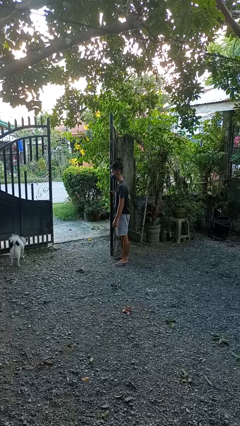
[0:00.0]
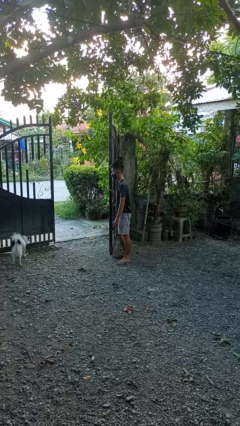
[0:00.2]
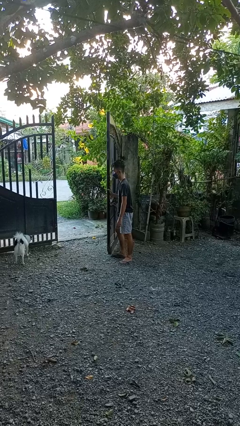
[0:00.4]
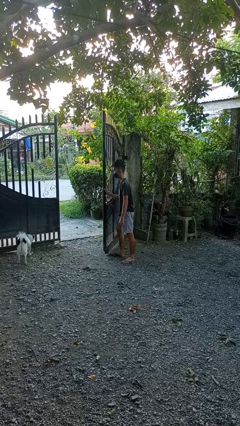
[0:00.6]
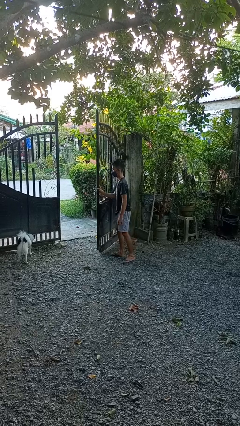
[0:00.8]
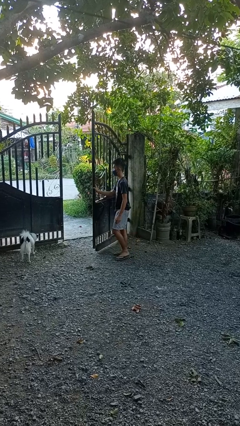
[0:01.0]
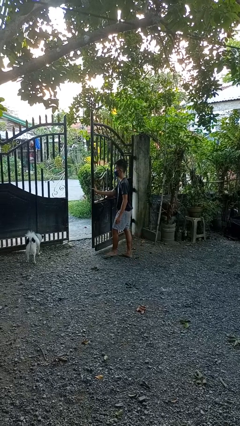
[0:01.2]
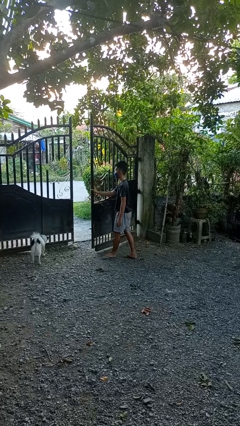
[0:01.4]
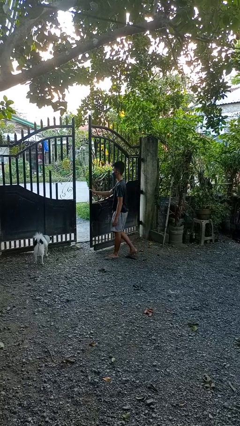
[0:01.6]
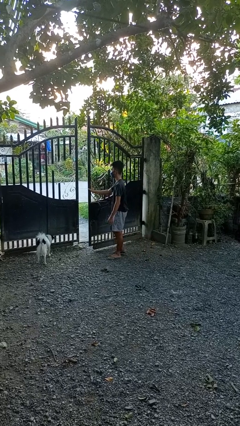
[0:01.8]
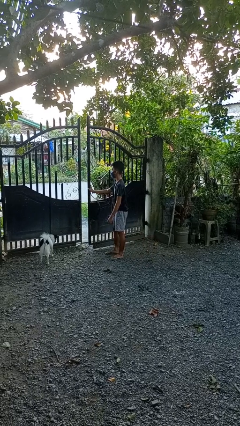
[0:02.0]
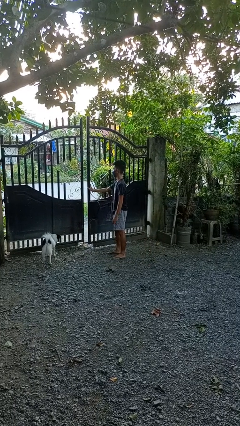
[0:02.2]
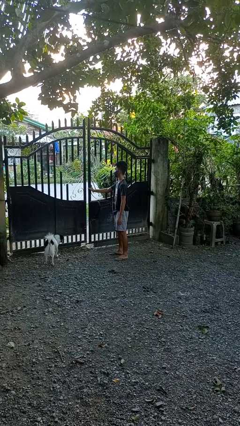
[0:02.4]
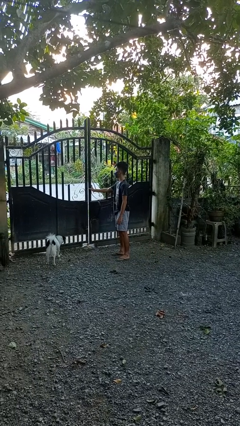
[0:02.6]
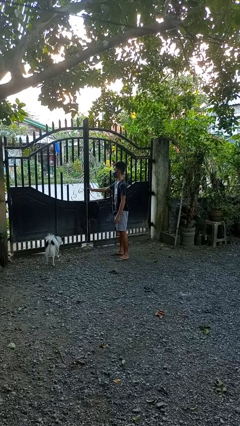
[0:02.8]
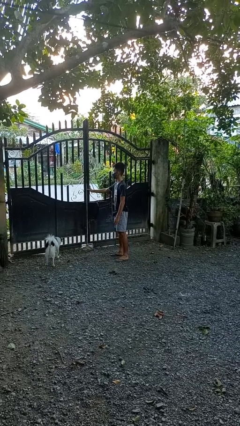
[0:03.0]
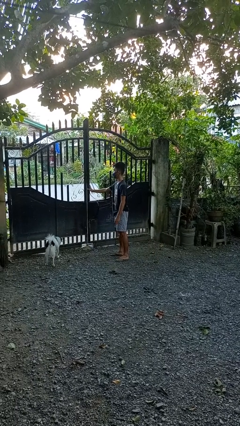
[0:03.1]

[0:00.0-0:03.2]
person closes gate

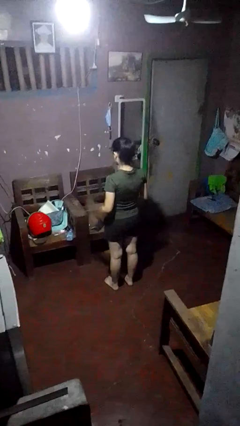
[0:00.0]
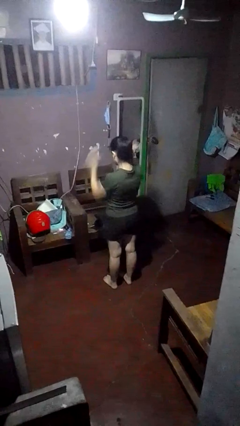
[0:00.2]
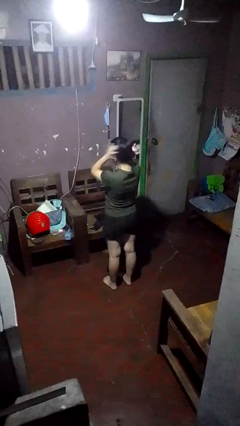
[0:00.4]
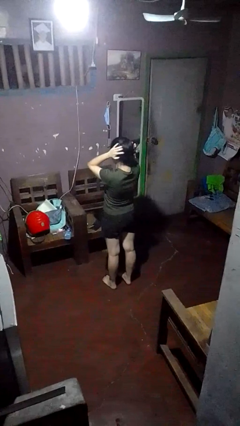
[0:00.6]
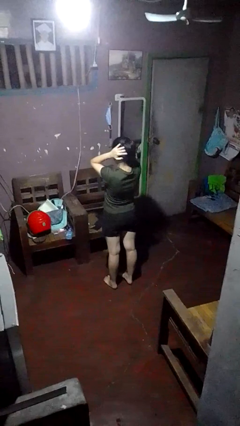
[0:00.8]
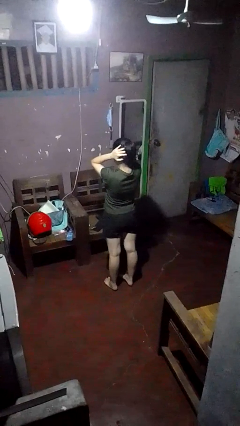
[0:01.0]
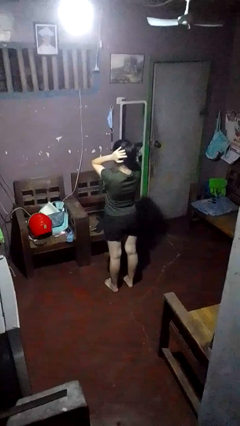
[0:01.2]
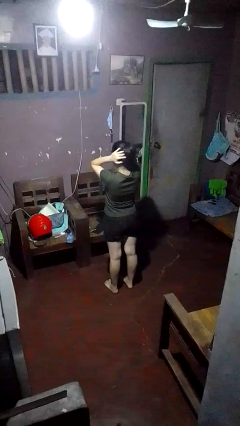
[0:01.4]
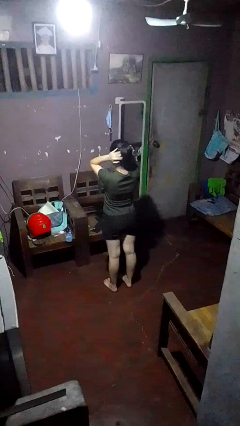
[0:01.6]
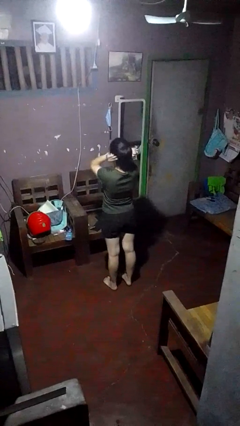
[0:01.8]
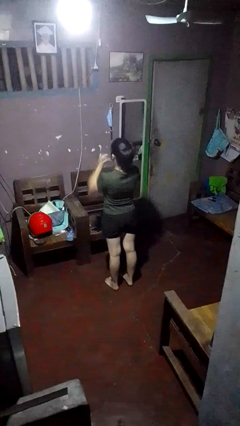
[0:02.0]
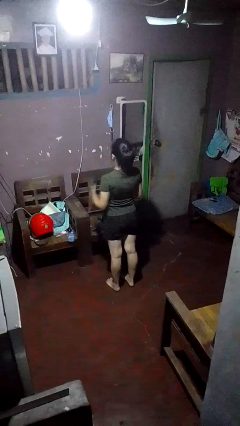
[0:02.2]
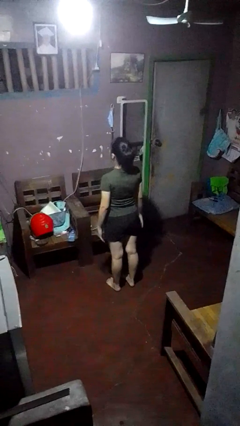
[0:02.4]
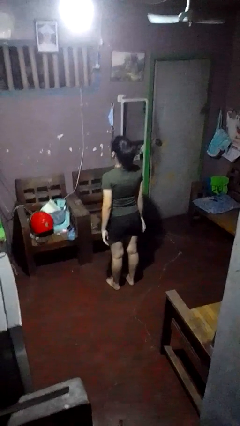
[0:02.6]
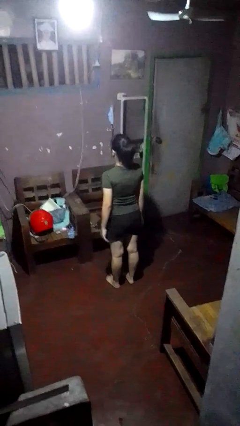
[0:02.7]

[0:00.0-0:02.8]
person puts fingers in ear

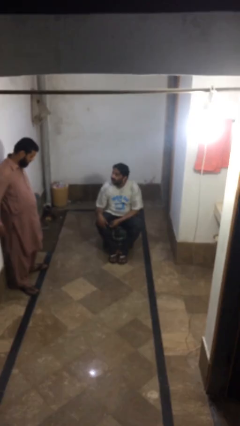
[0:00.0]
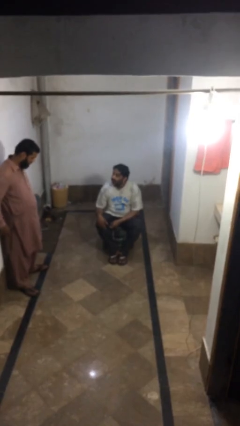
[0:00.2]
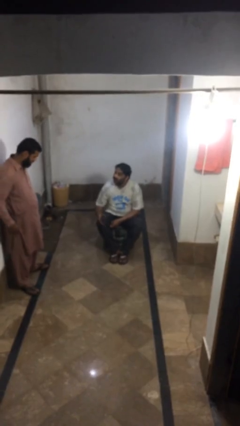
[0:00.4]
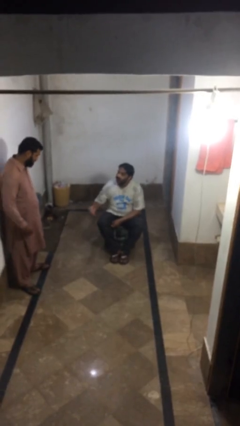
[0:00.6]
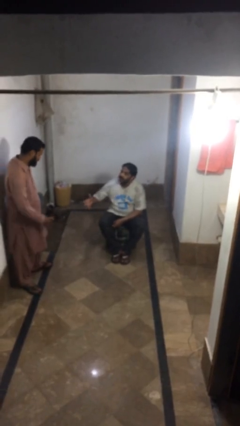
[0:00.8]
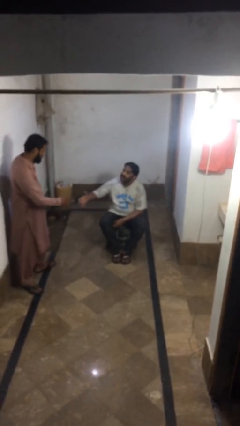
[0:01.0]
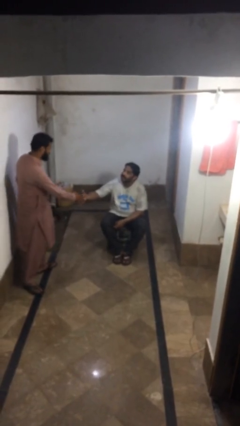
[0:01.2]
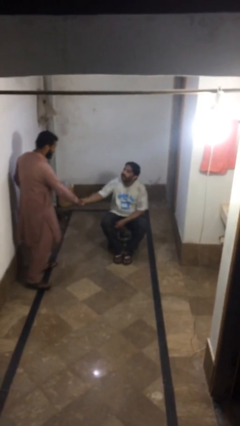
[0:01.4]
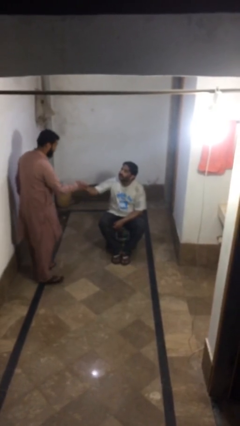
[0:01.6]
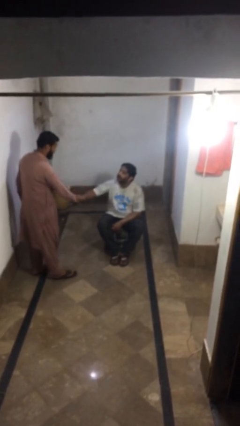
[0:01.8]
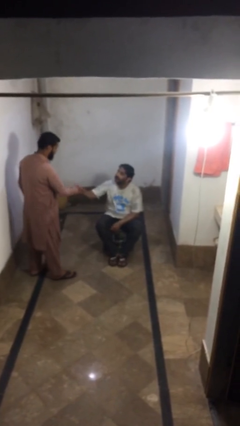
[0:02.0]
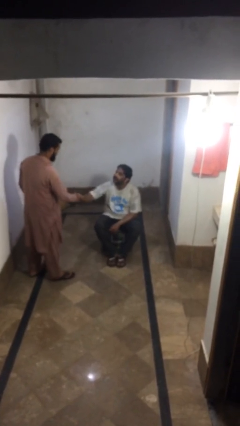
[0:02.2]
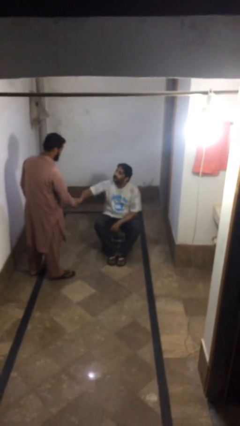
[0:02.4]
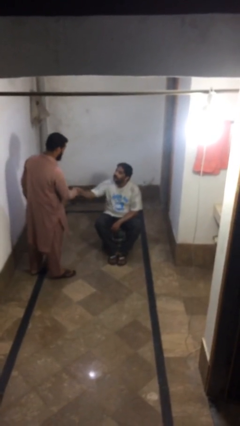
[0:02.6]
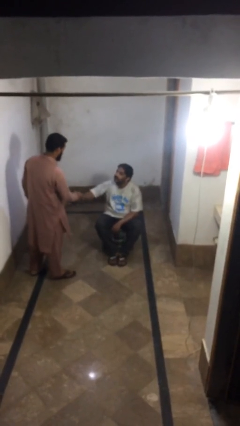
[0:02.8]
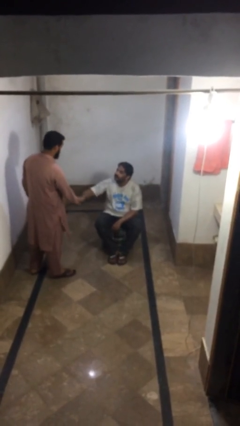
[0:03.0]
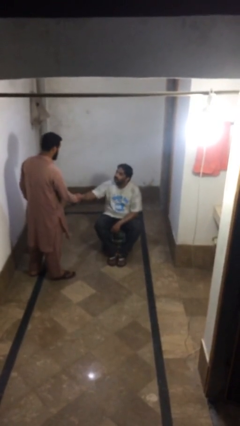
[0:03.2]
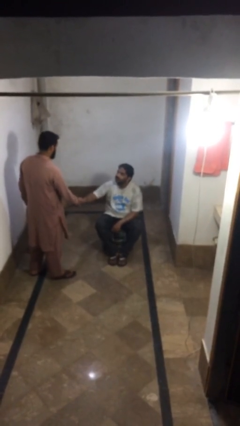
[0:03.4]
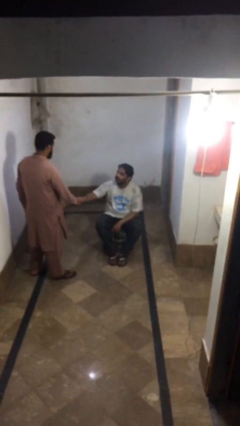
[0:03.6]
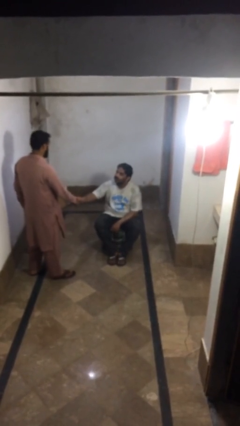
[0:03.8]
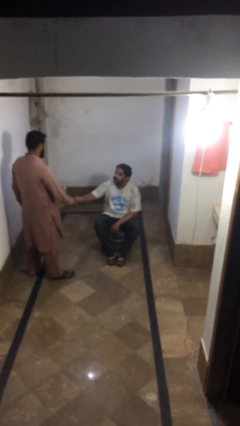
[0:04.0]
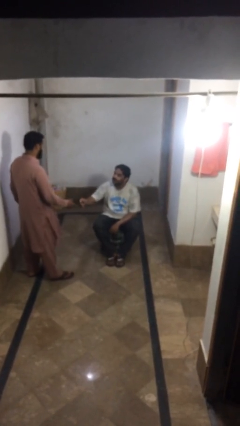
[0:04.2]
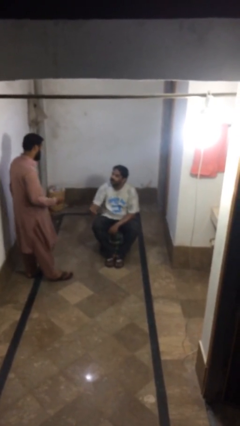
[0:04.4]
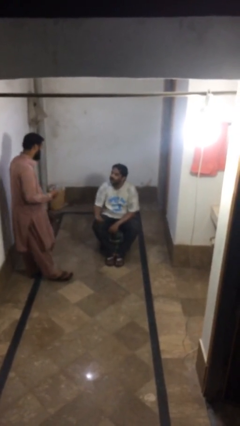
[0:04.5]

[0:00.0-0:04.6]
person shakes hand

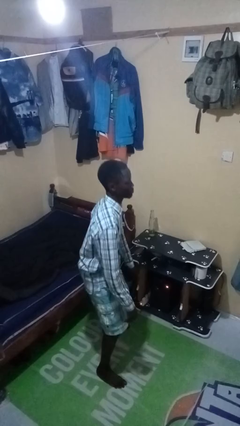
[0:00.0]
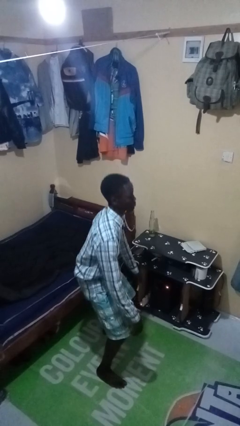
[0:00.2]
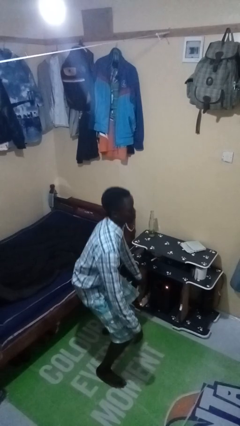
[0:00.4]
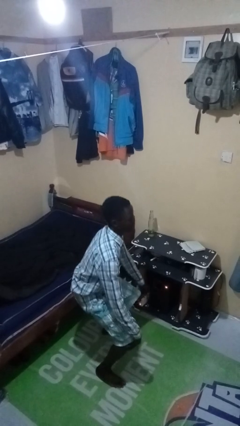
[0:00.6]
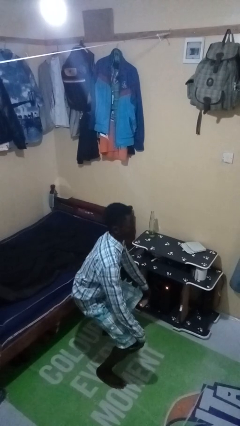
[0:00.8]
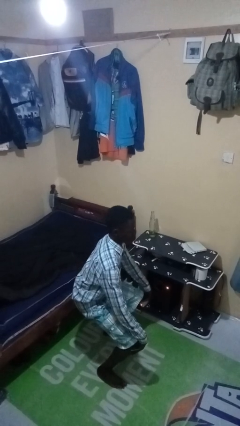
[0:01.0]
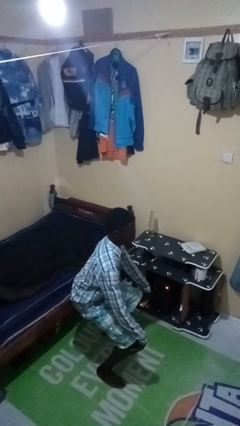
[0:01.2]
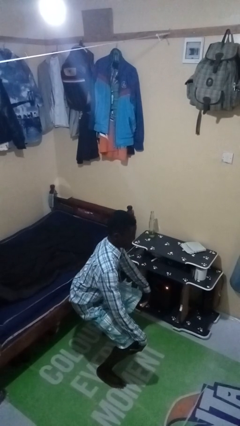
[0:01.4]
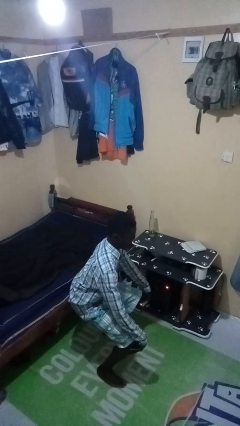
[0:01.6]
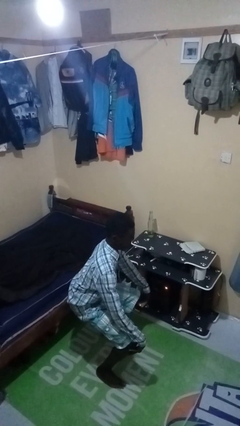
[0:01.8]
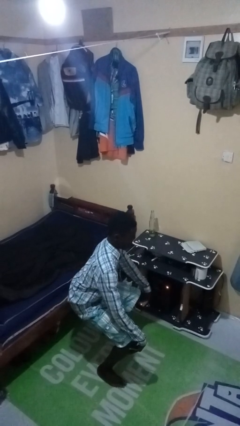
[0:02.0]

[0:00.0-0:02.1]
person squats

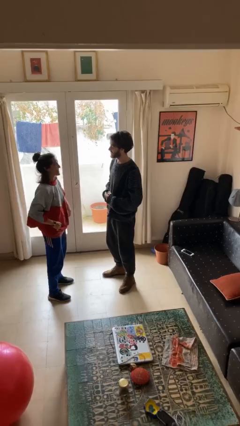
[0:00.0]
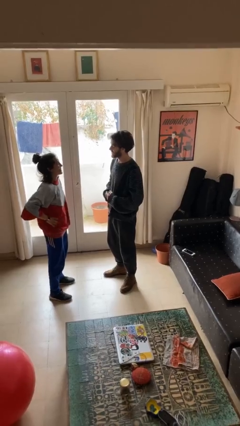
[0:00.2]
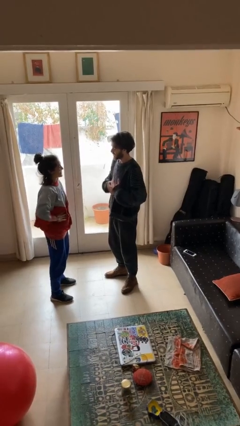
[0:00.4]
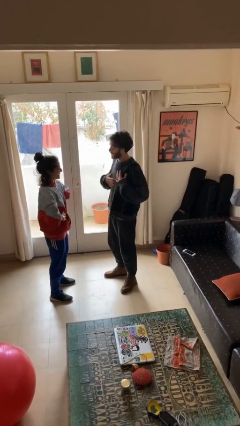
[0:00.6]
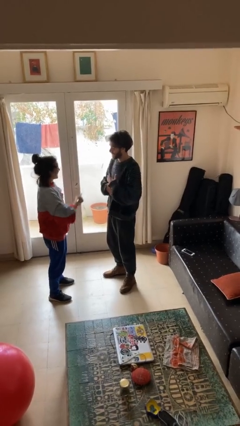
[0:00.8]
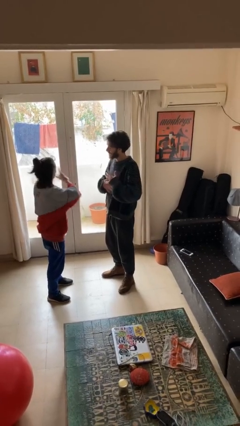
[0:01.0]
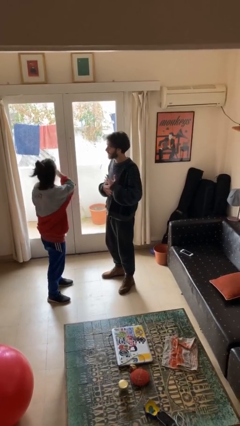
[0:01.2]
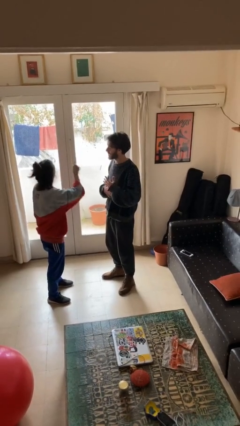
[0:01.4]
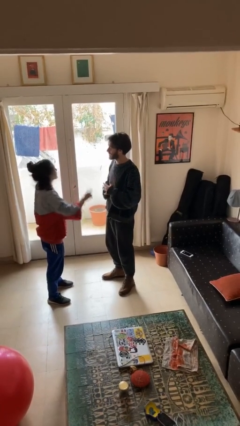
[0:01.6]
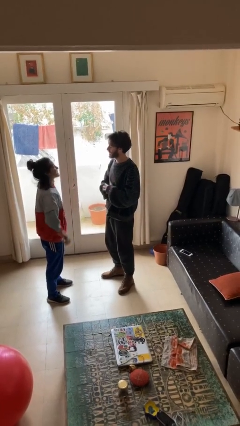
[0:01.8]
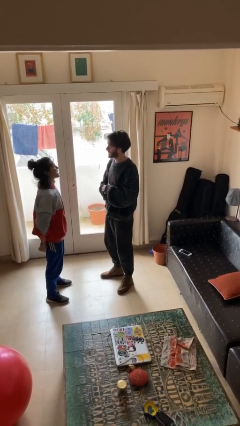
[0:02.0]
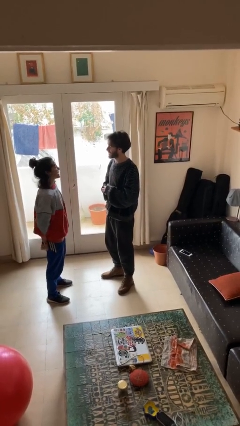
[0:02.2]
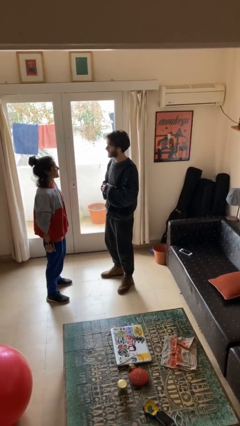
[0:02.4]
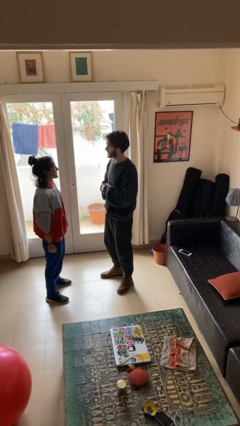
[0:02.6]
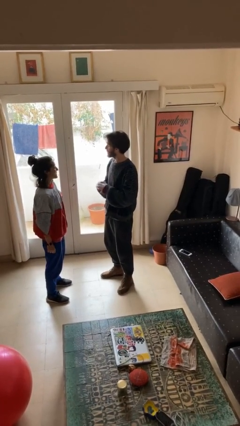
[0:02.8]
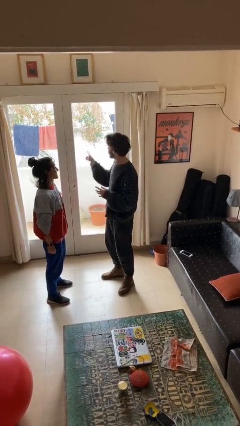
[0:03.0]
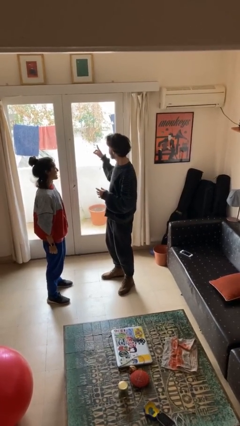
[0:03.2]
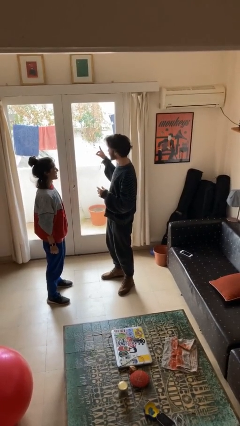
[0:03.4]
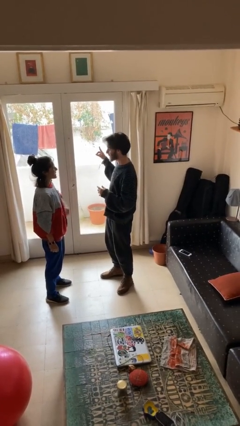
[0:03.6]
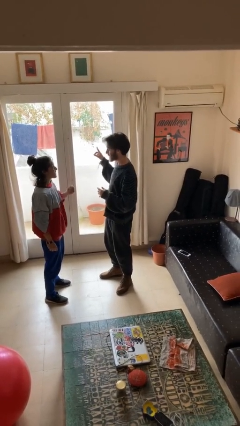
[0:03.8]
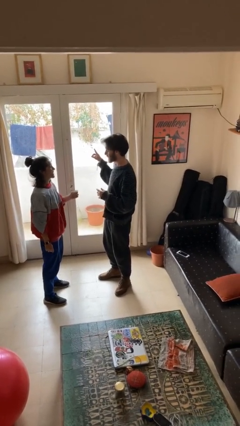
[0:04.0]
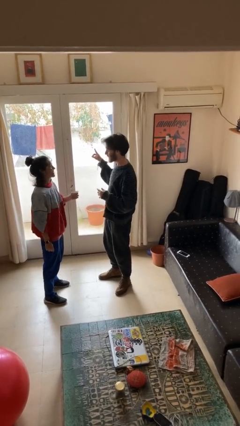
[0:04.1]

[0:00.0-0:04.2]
person talks to person

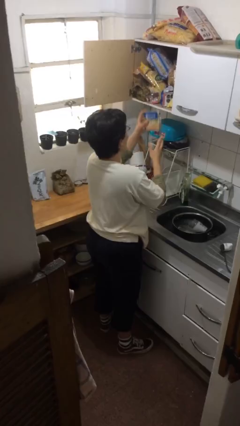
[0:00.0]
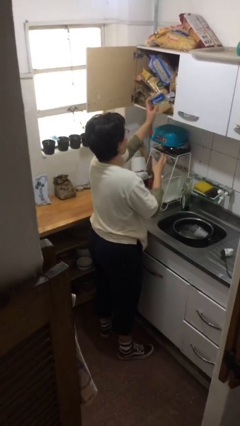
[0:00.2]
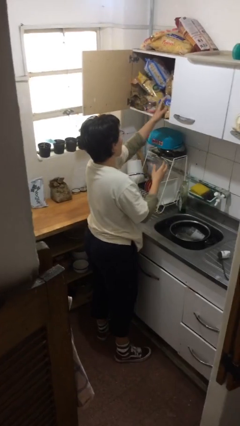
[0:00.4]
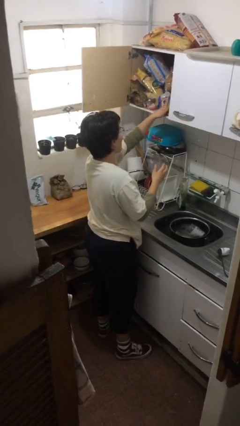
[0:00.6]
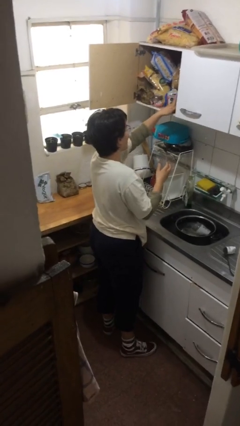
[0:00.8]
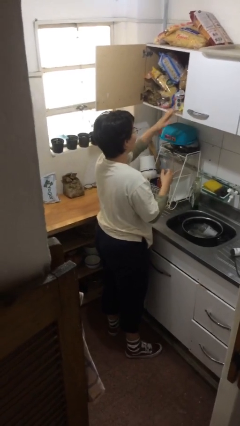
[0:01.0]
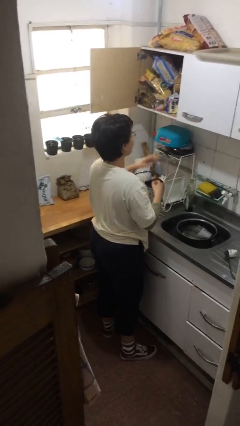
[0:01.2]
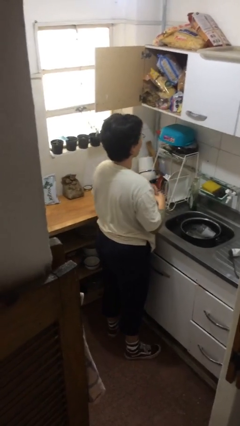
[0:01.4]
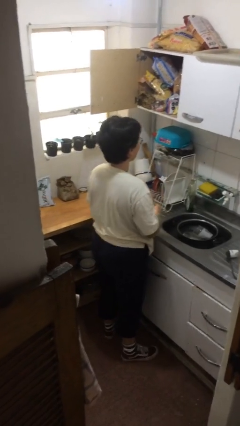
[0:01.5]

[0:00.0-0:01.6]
person puts object in cabinet
